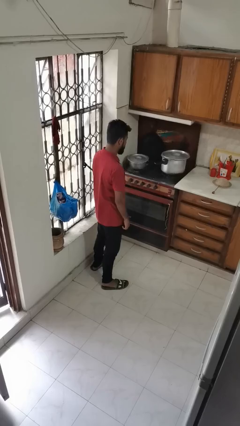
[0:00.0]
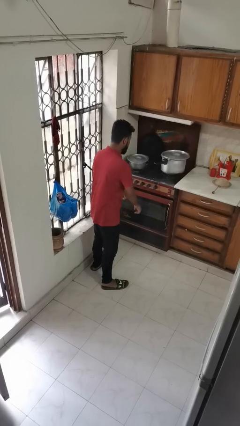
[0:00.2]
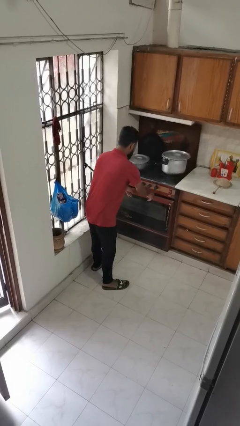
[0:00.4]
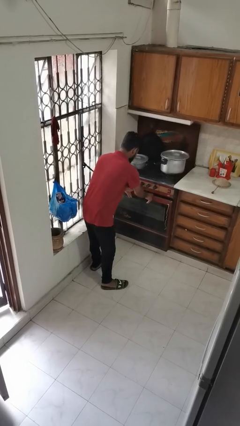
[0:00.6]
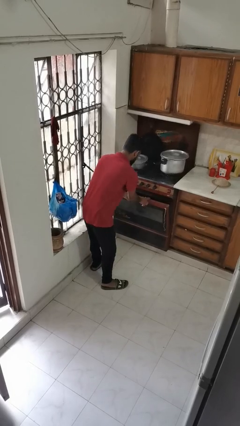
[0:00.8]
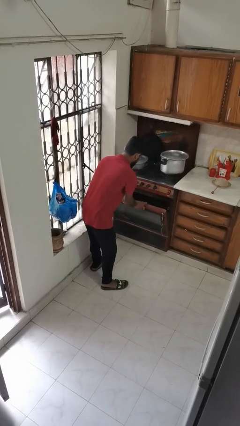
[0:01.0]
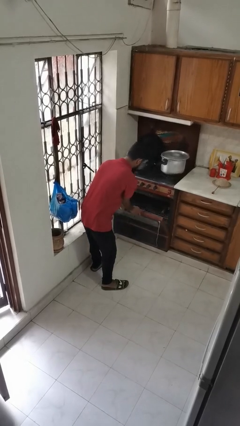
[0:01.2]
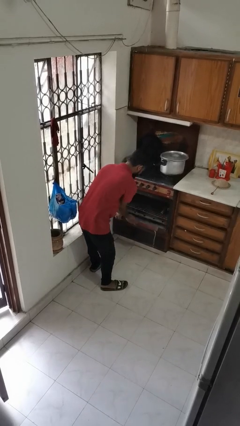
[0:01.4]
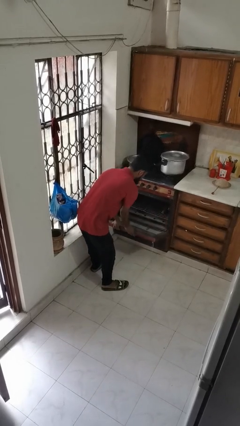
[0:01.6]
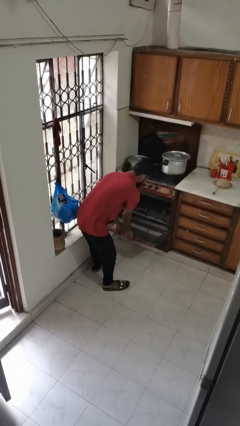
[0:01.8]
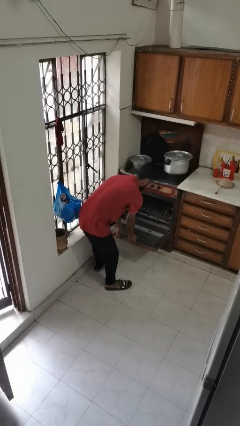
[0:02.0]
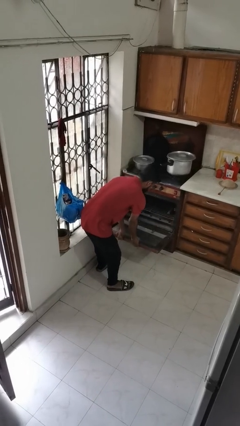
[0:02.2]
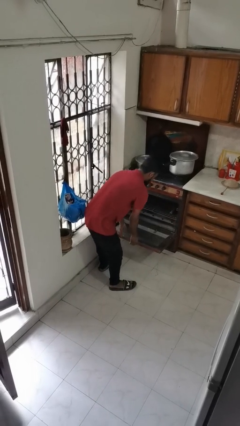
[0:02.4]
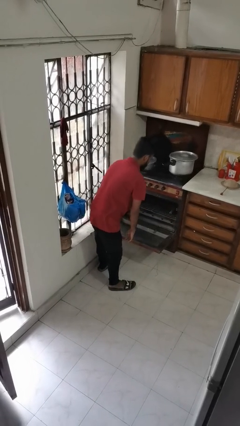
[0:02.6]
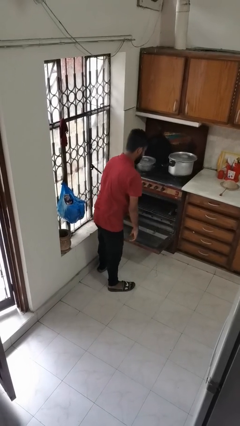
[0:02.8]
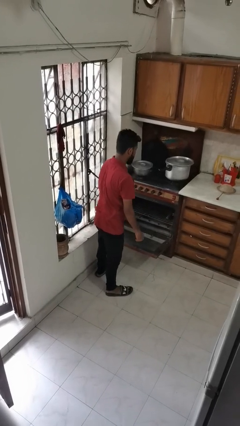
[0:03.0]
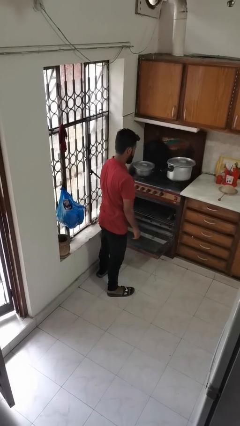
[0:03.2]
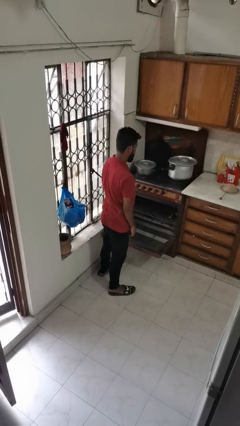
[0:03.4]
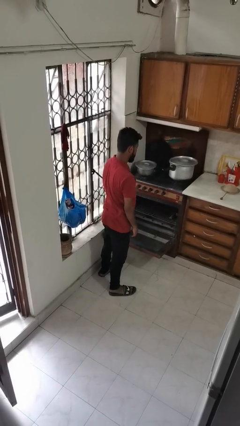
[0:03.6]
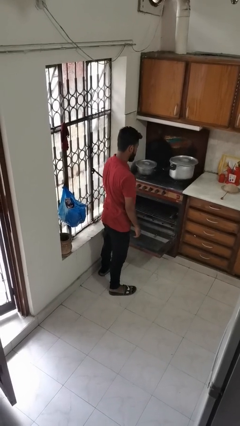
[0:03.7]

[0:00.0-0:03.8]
person opens oven door

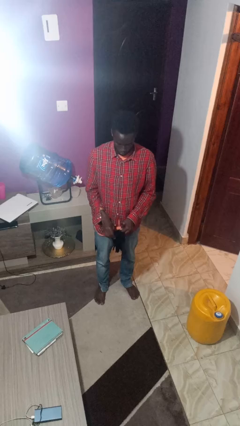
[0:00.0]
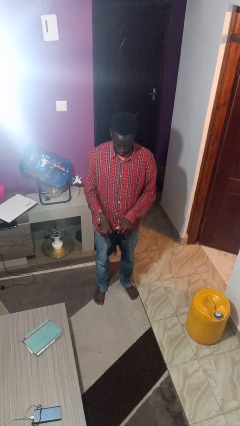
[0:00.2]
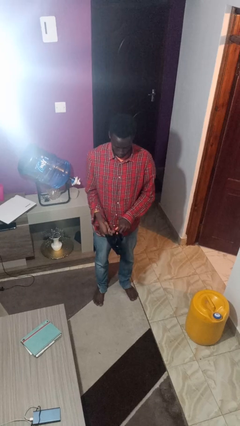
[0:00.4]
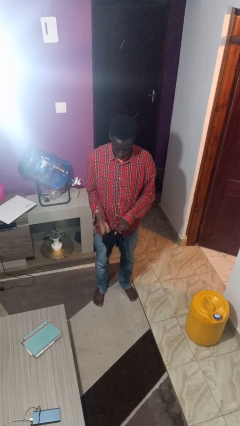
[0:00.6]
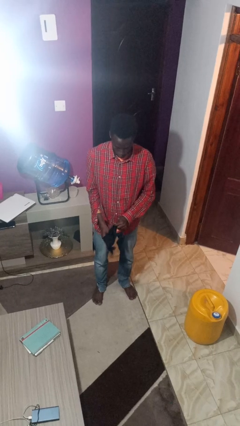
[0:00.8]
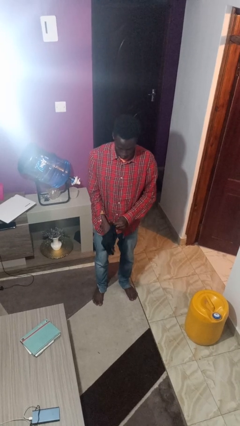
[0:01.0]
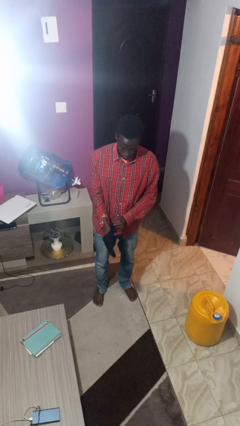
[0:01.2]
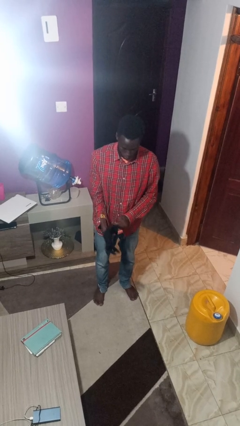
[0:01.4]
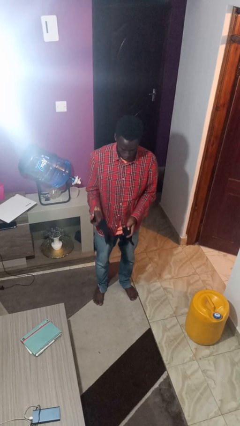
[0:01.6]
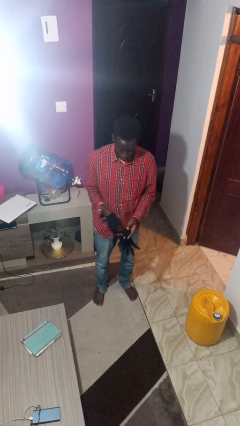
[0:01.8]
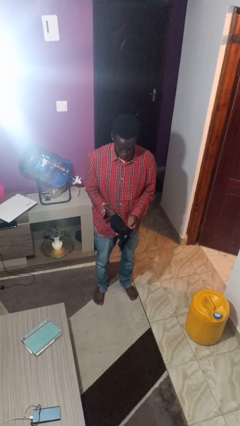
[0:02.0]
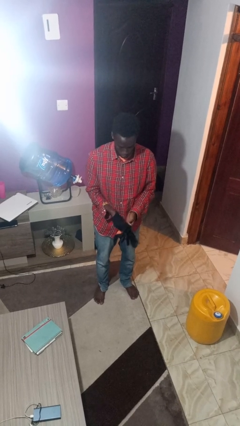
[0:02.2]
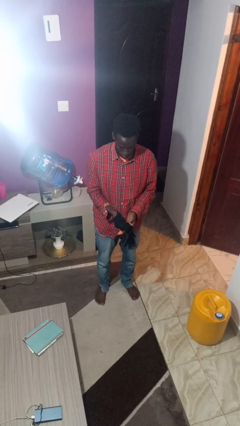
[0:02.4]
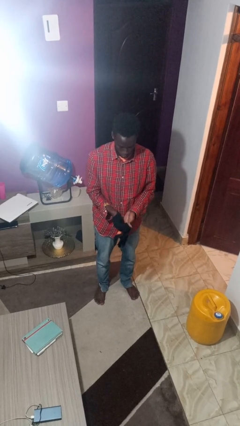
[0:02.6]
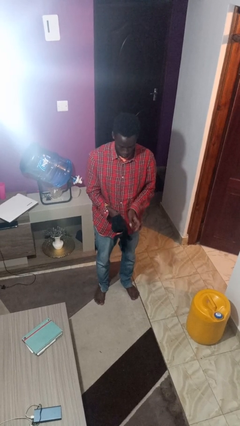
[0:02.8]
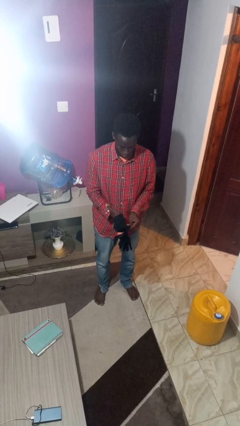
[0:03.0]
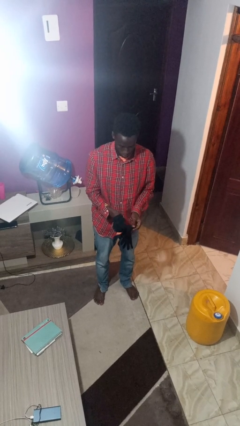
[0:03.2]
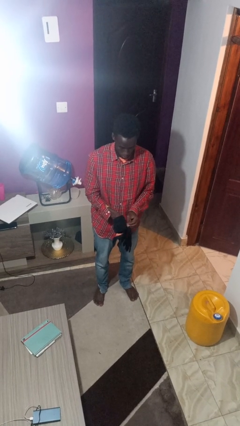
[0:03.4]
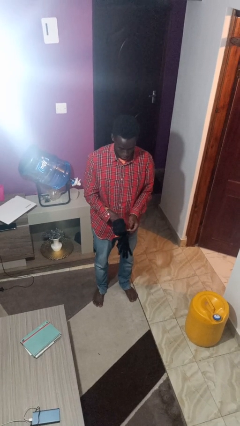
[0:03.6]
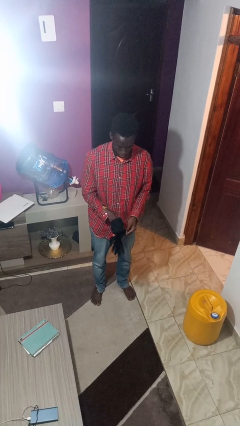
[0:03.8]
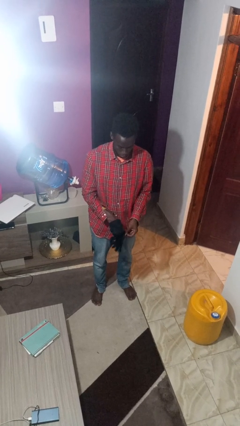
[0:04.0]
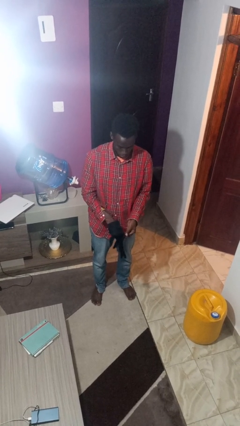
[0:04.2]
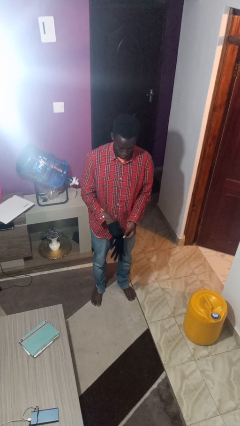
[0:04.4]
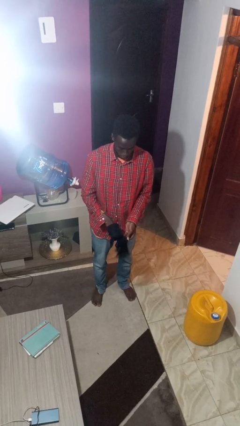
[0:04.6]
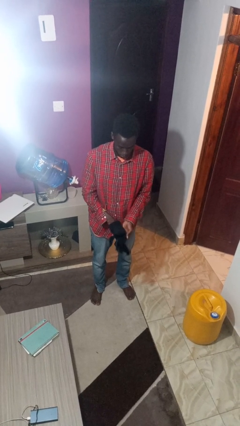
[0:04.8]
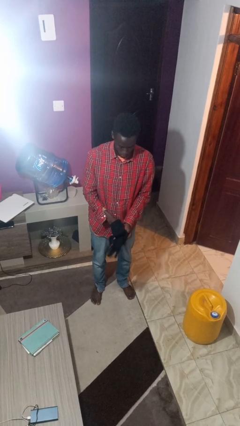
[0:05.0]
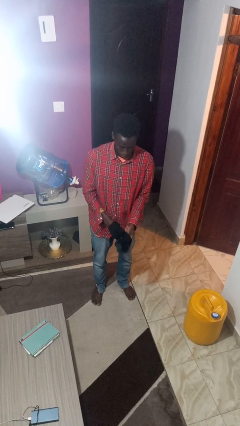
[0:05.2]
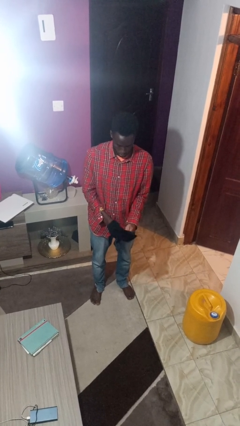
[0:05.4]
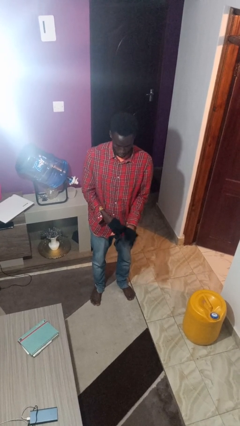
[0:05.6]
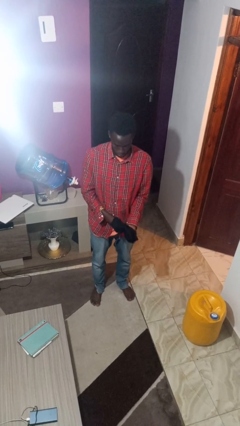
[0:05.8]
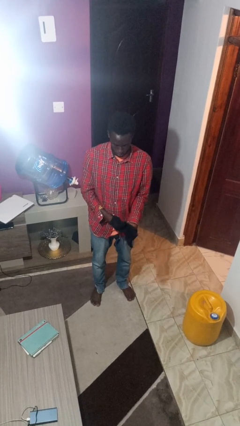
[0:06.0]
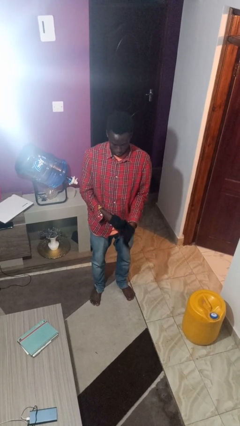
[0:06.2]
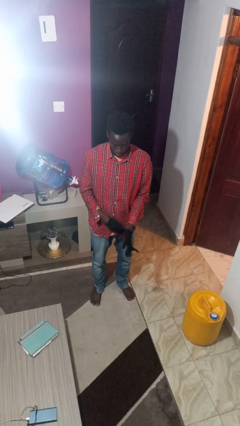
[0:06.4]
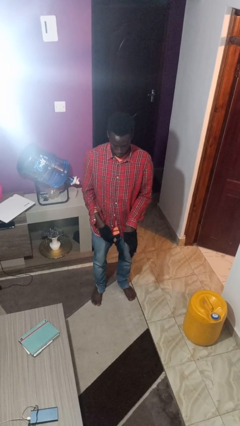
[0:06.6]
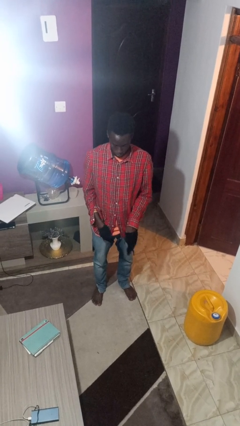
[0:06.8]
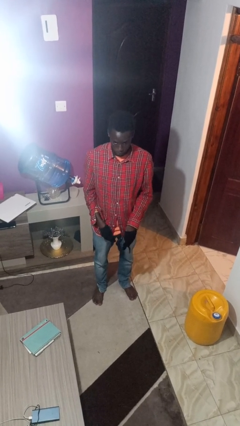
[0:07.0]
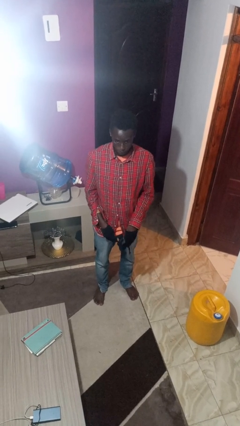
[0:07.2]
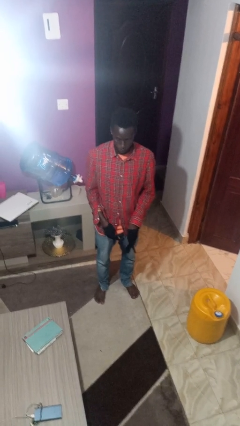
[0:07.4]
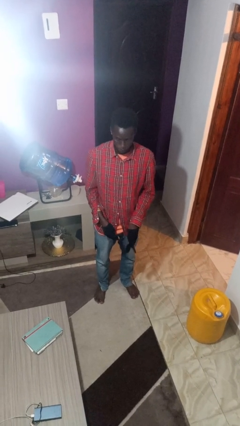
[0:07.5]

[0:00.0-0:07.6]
person puts on gloves

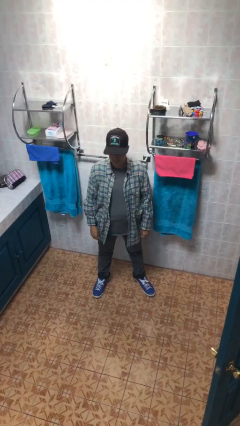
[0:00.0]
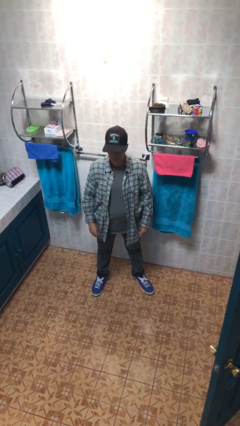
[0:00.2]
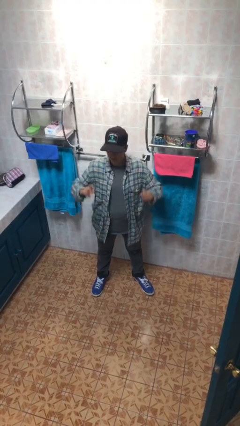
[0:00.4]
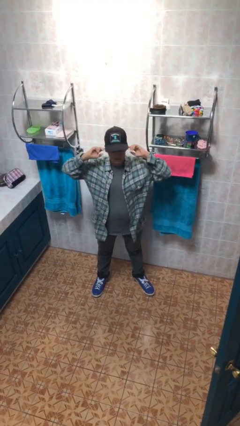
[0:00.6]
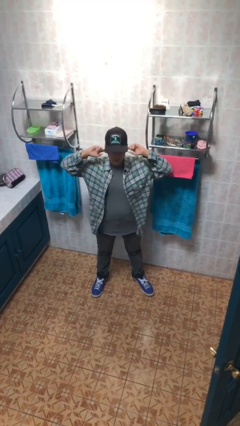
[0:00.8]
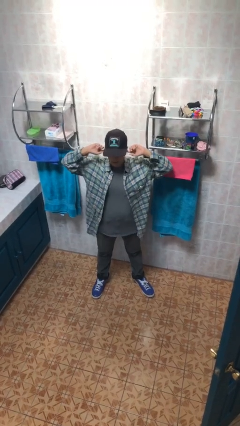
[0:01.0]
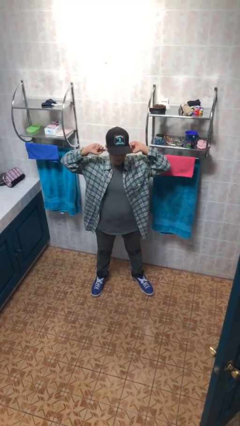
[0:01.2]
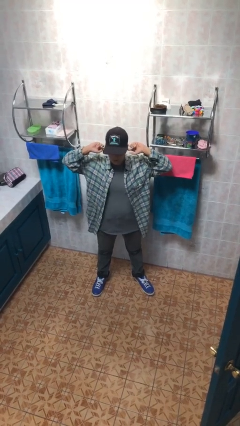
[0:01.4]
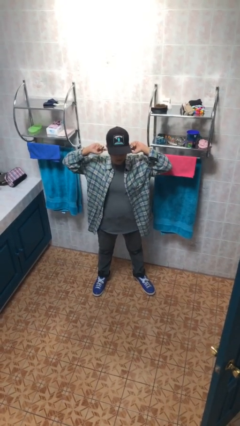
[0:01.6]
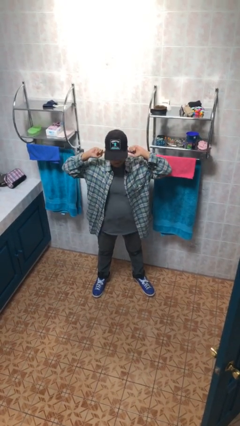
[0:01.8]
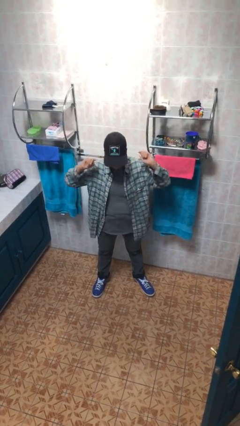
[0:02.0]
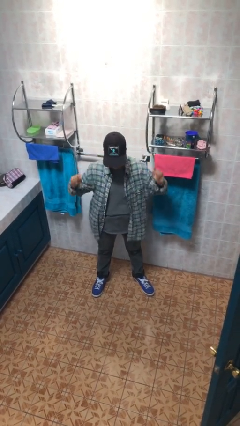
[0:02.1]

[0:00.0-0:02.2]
person puts fingers in ear

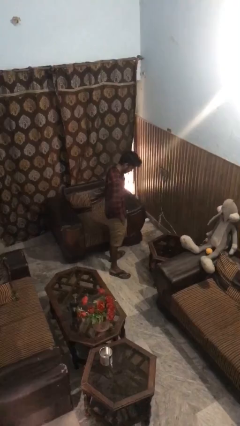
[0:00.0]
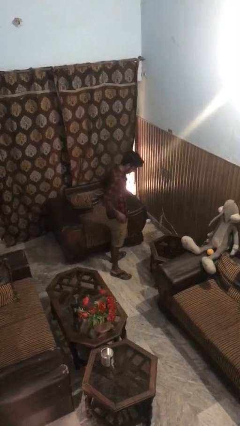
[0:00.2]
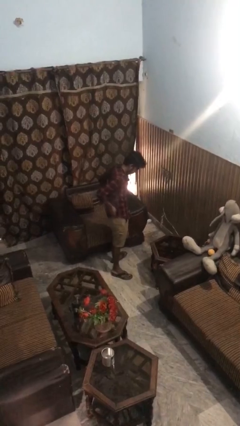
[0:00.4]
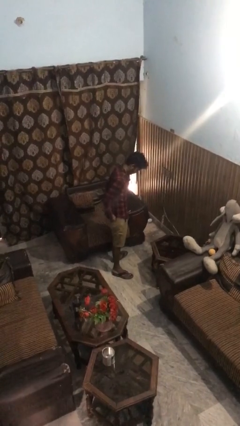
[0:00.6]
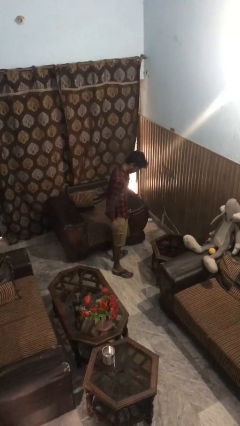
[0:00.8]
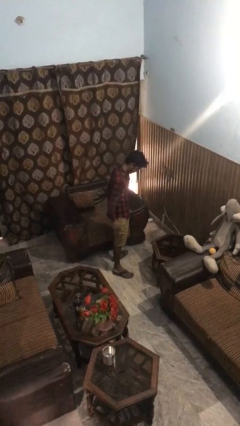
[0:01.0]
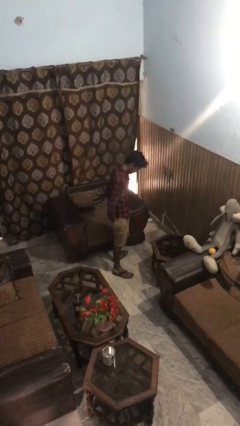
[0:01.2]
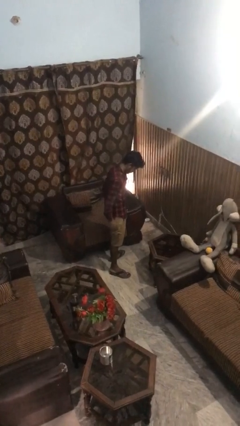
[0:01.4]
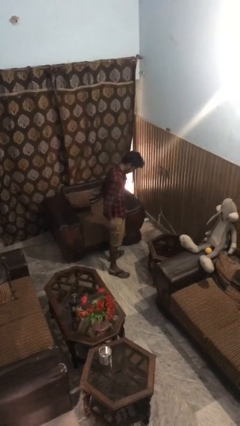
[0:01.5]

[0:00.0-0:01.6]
person puts hands in back pockets

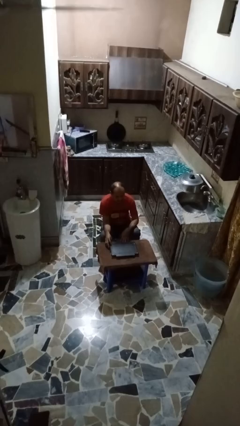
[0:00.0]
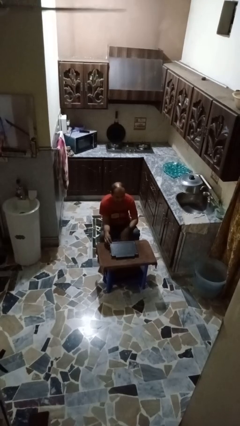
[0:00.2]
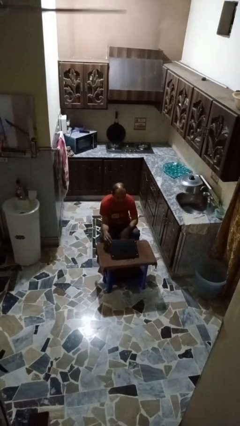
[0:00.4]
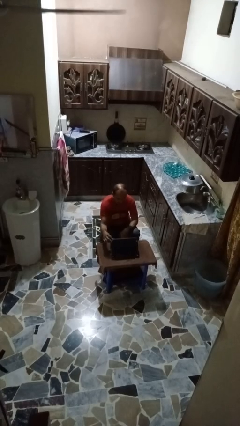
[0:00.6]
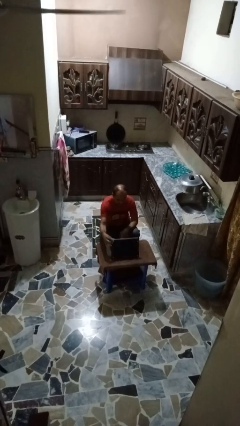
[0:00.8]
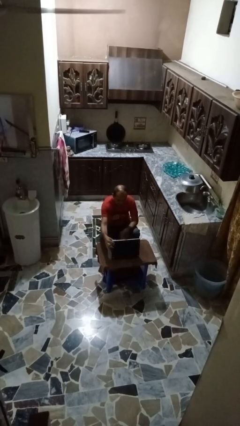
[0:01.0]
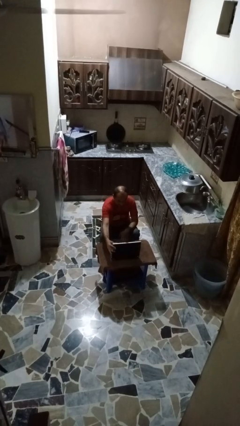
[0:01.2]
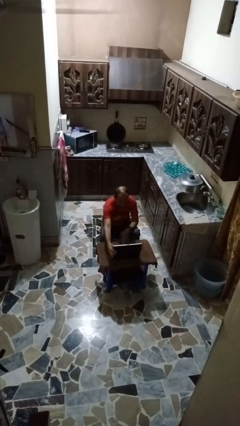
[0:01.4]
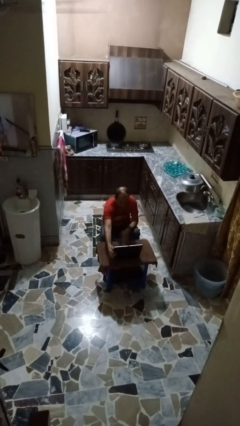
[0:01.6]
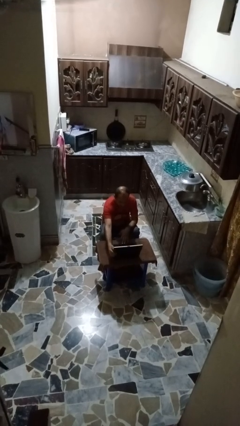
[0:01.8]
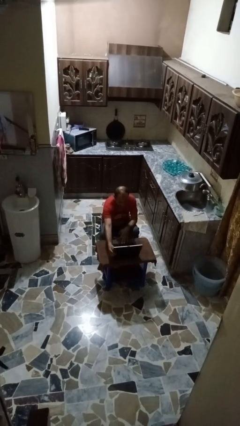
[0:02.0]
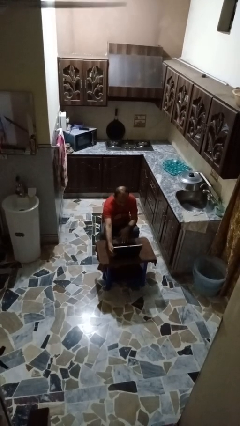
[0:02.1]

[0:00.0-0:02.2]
person opens laptop
